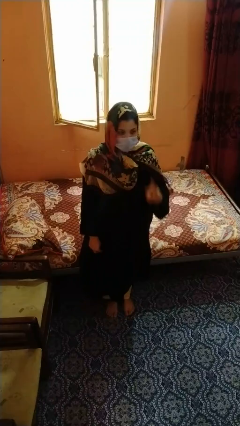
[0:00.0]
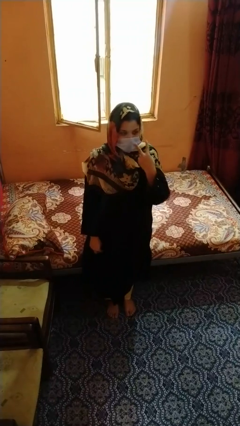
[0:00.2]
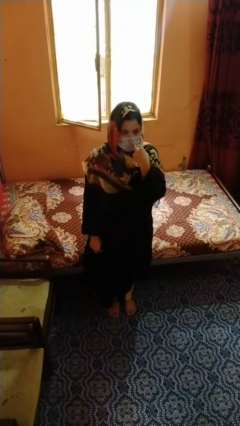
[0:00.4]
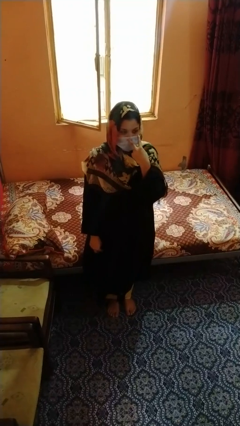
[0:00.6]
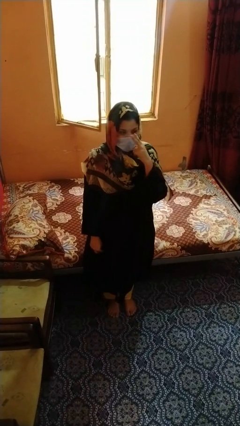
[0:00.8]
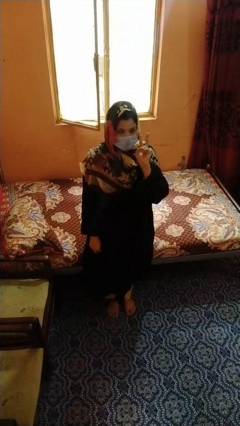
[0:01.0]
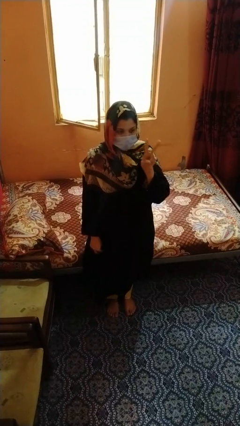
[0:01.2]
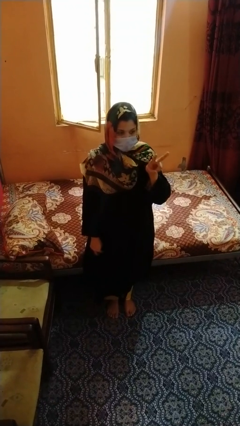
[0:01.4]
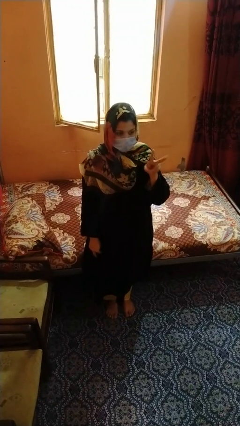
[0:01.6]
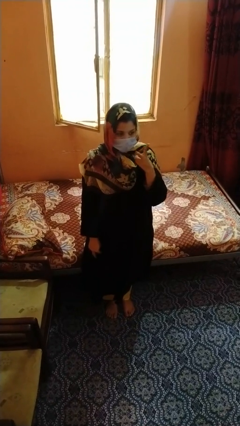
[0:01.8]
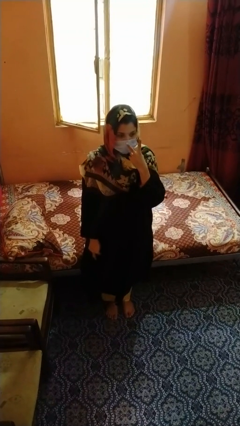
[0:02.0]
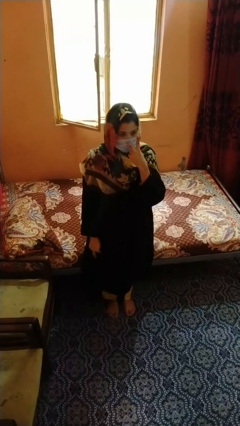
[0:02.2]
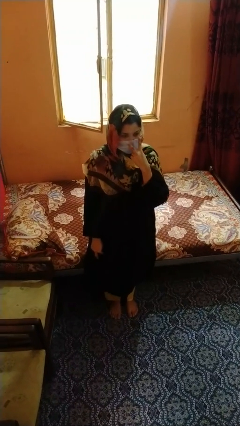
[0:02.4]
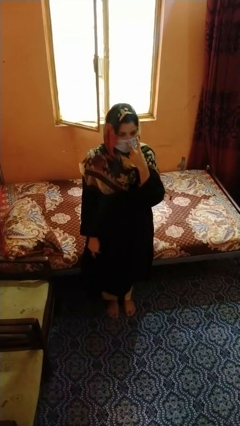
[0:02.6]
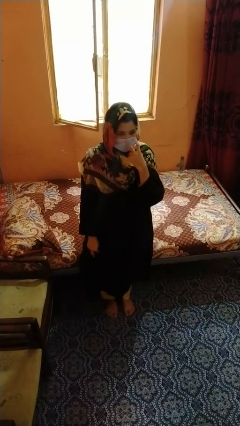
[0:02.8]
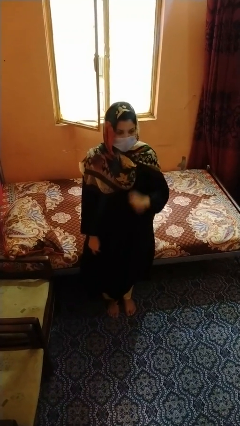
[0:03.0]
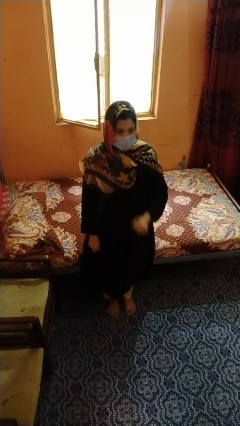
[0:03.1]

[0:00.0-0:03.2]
person gestures watch closely

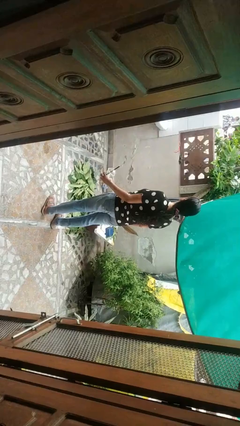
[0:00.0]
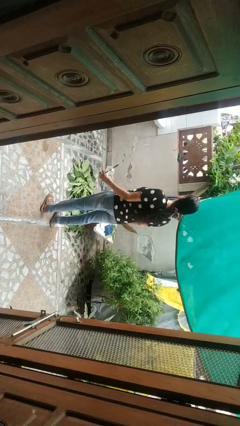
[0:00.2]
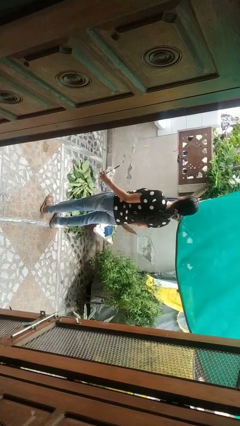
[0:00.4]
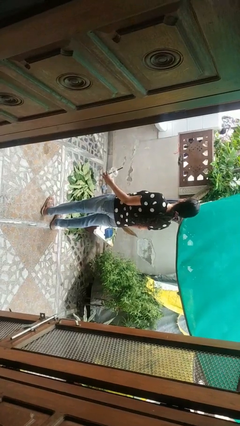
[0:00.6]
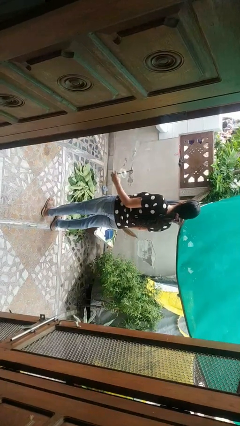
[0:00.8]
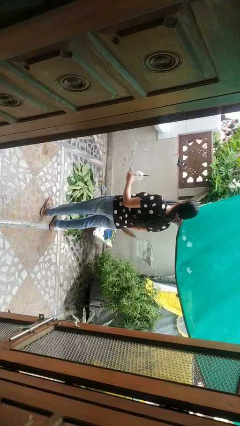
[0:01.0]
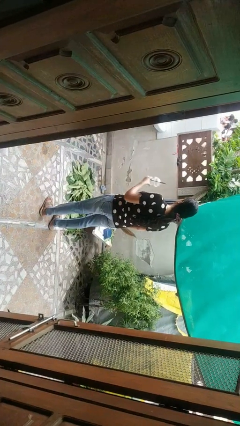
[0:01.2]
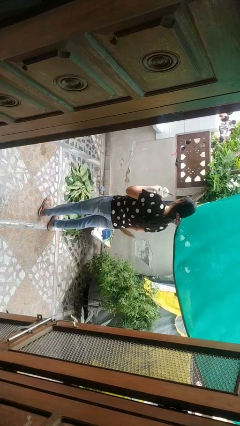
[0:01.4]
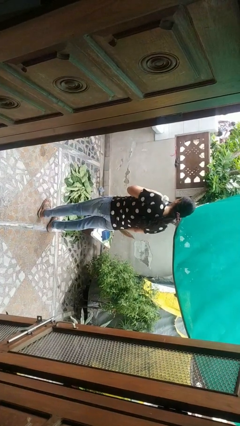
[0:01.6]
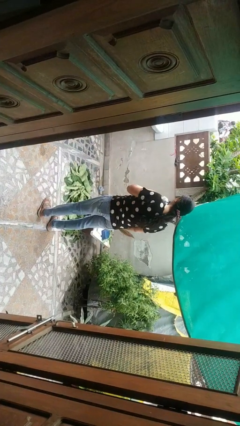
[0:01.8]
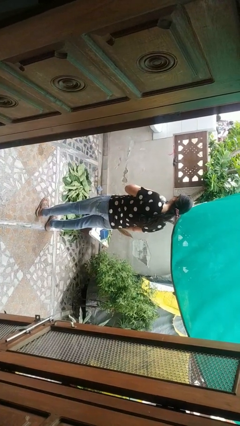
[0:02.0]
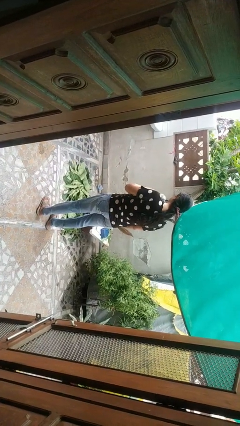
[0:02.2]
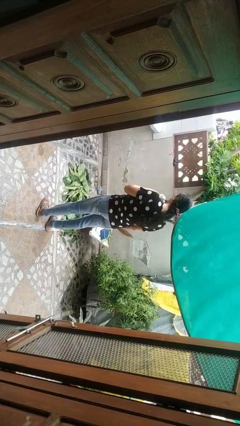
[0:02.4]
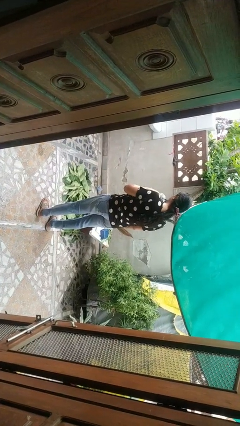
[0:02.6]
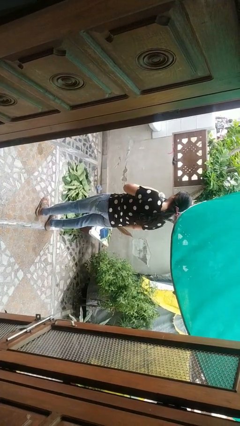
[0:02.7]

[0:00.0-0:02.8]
person drinks from straw

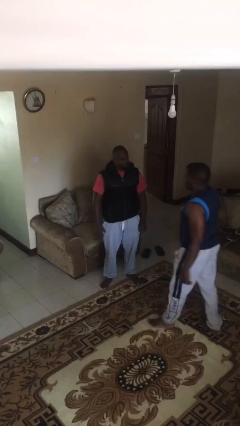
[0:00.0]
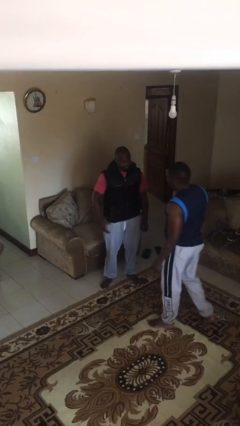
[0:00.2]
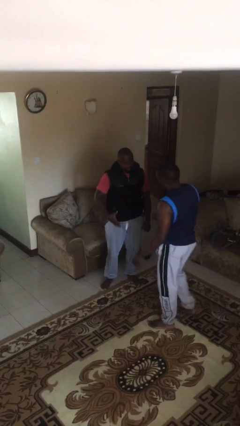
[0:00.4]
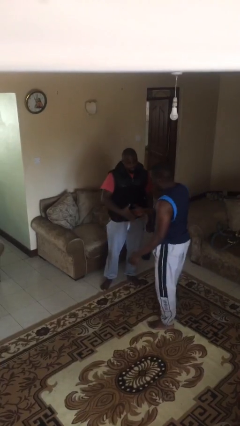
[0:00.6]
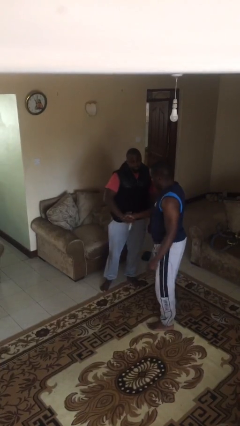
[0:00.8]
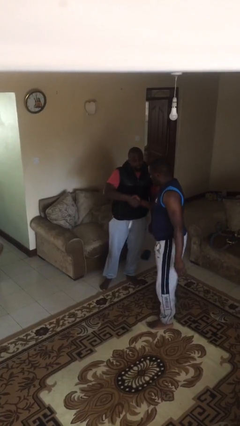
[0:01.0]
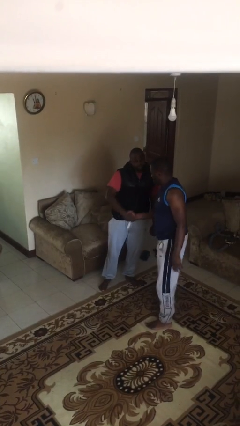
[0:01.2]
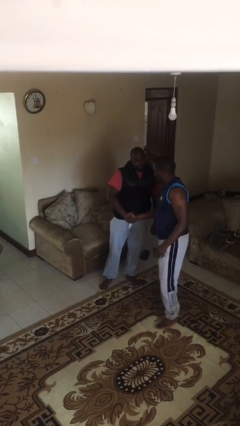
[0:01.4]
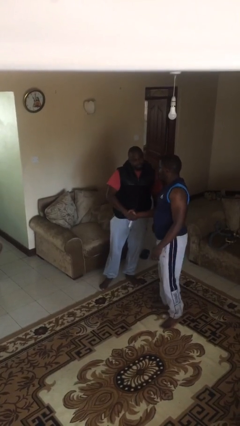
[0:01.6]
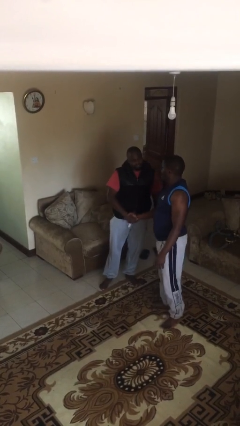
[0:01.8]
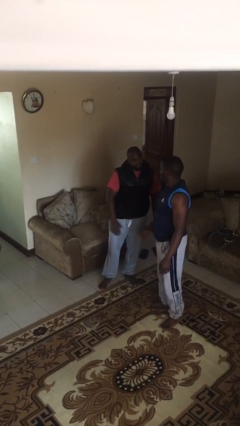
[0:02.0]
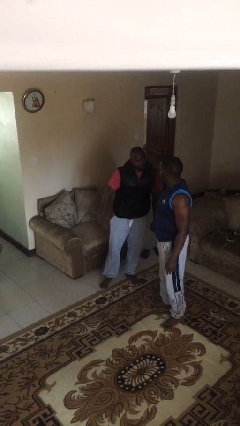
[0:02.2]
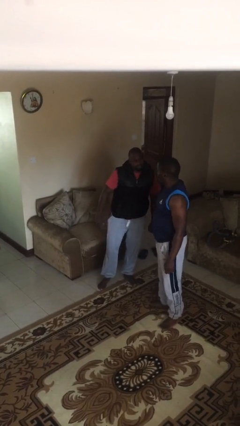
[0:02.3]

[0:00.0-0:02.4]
person shakes hand

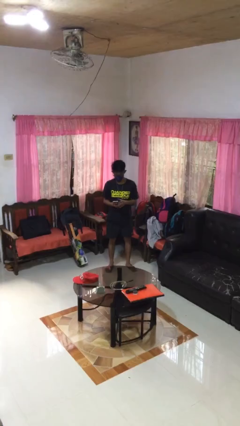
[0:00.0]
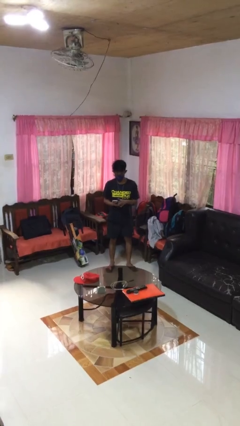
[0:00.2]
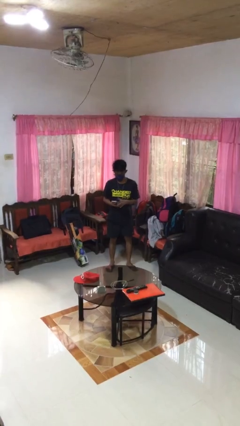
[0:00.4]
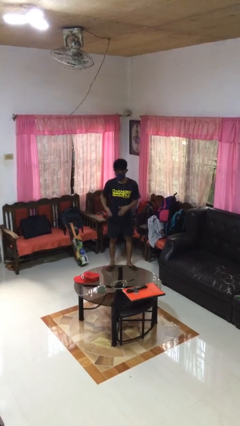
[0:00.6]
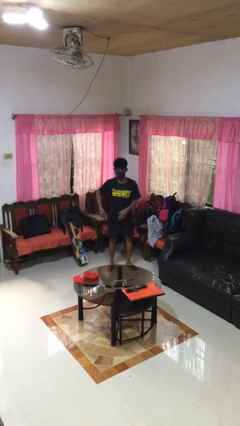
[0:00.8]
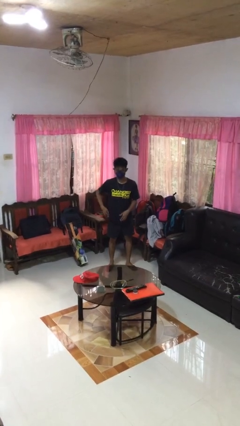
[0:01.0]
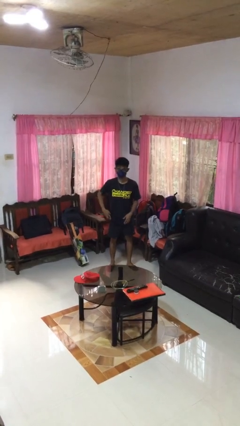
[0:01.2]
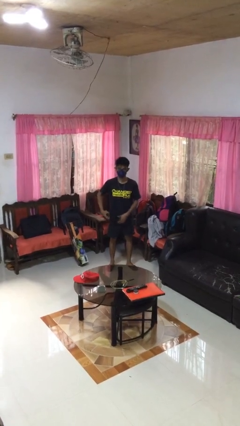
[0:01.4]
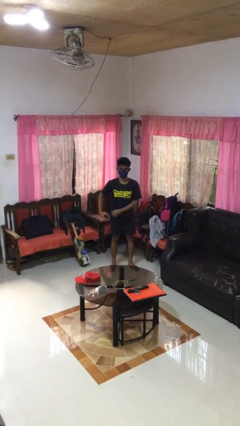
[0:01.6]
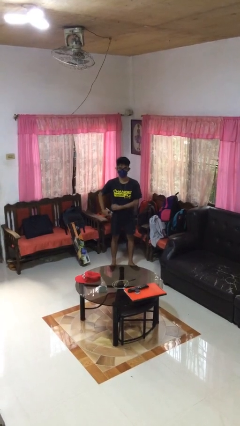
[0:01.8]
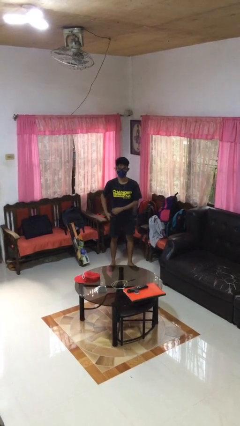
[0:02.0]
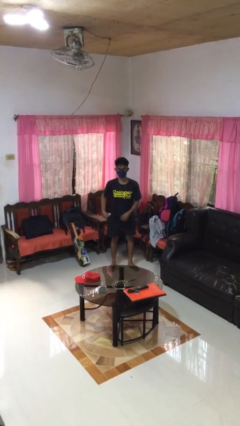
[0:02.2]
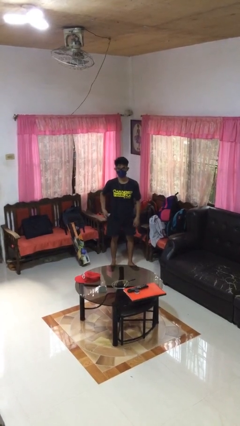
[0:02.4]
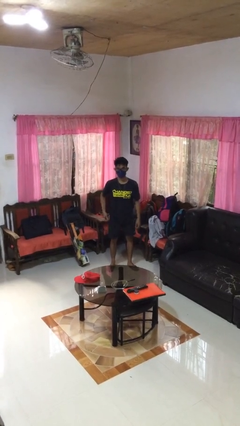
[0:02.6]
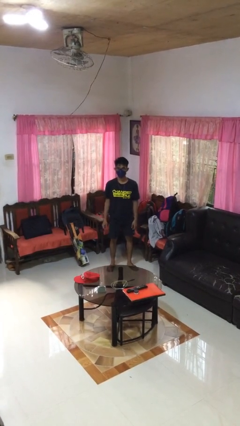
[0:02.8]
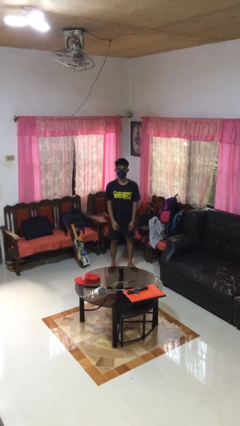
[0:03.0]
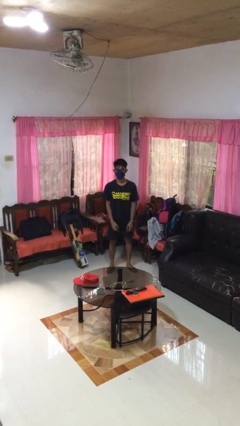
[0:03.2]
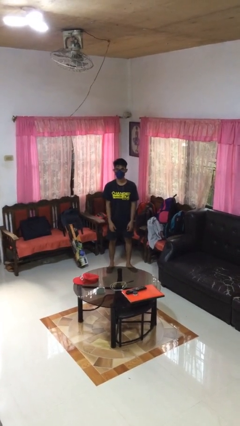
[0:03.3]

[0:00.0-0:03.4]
person puts phone into pocket

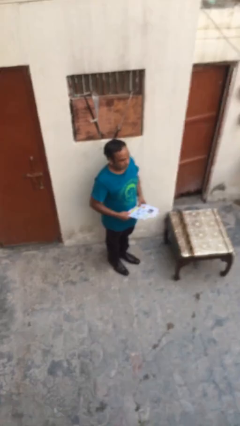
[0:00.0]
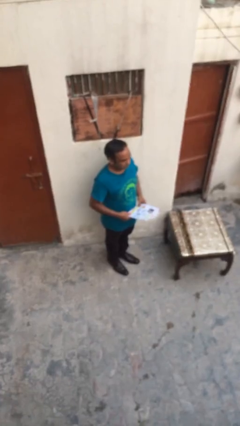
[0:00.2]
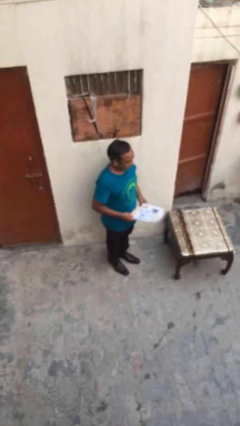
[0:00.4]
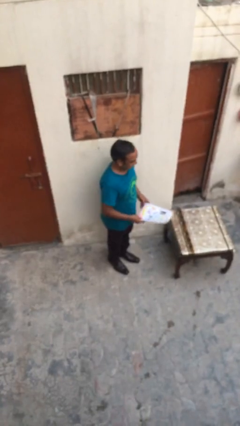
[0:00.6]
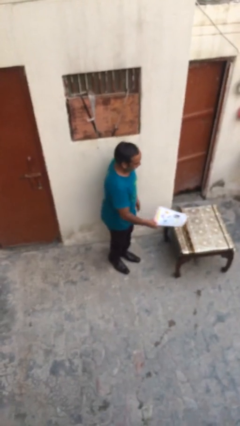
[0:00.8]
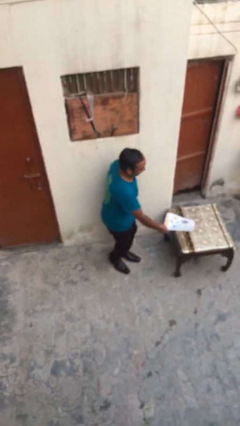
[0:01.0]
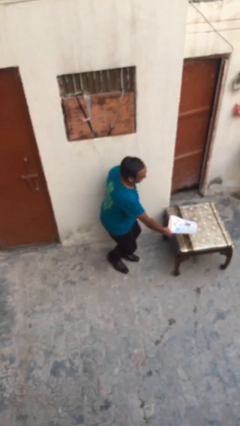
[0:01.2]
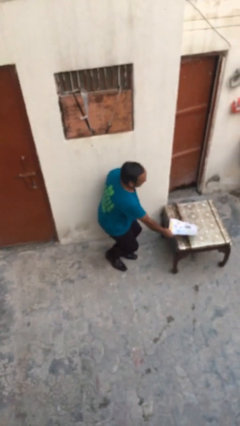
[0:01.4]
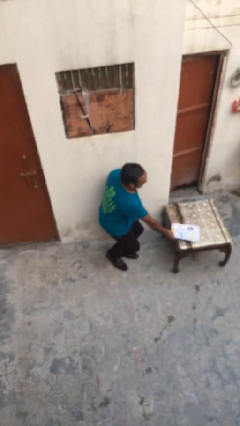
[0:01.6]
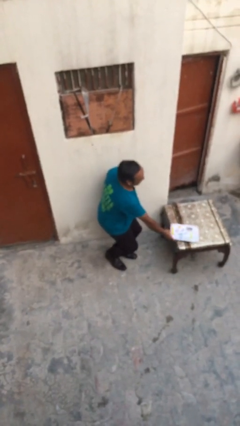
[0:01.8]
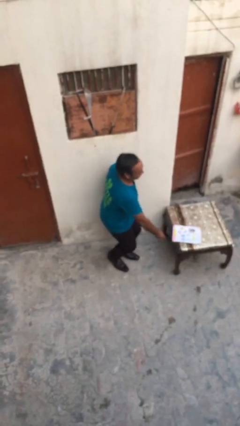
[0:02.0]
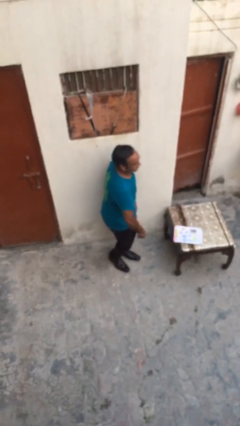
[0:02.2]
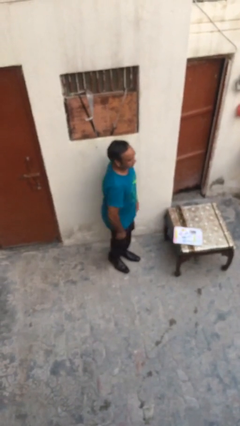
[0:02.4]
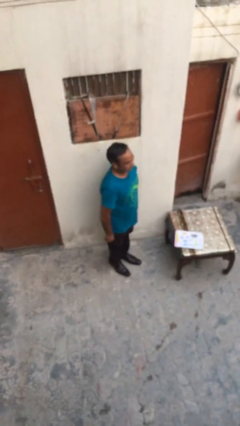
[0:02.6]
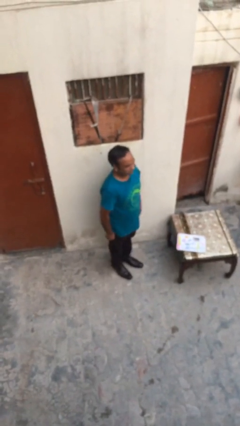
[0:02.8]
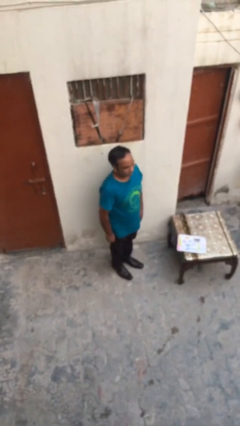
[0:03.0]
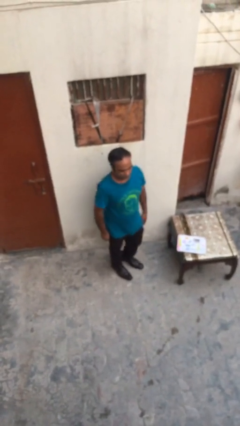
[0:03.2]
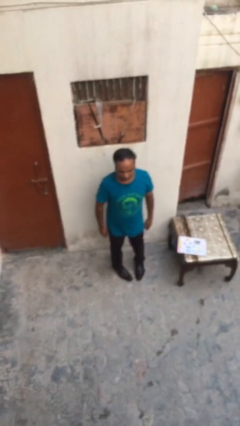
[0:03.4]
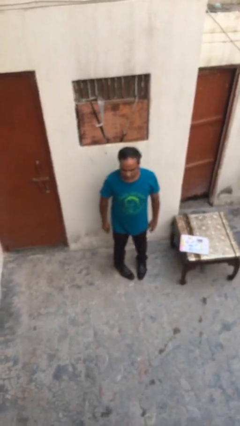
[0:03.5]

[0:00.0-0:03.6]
person puts down object on table

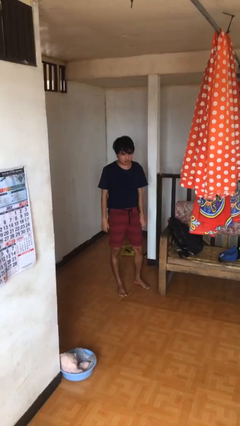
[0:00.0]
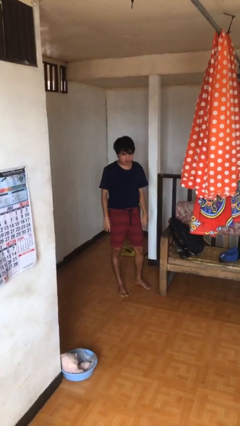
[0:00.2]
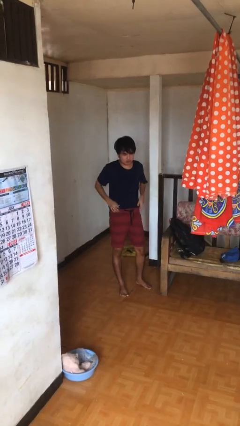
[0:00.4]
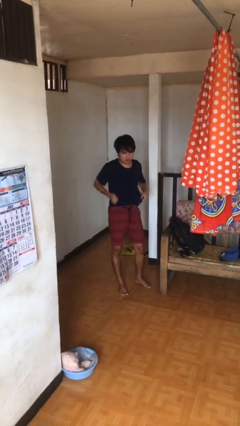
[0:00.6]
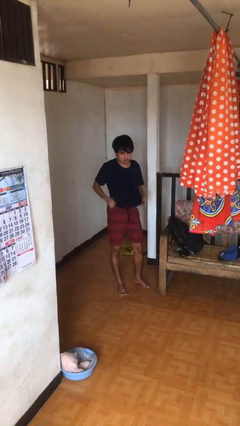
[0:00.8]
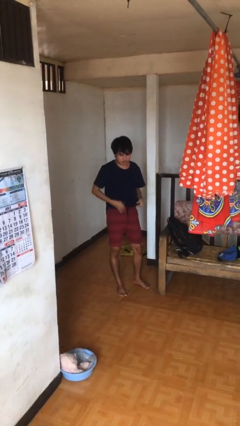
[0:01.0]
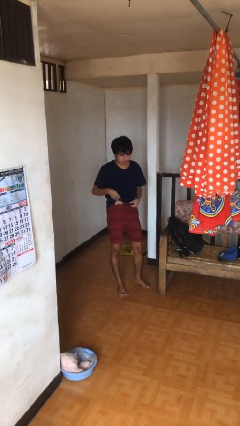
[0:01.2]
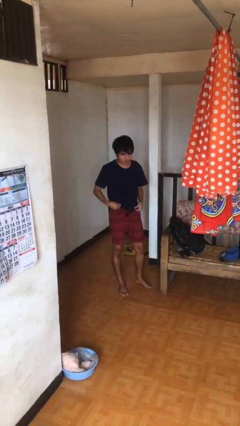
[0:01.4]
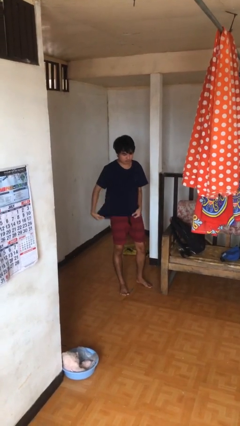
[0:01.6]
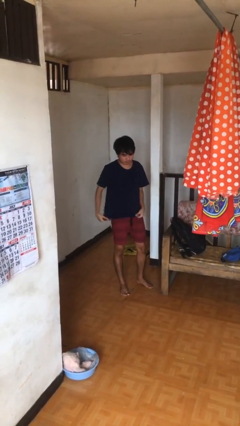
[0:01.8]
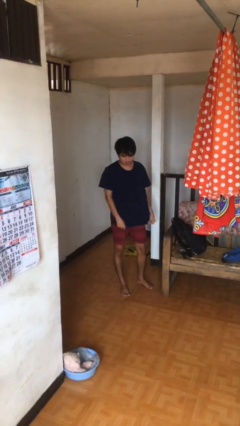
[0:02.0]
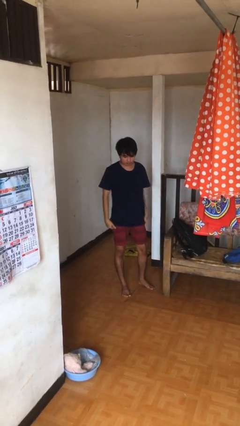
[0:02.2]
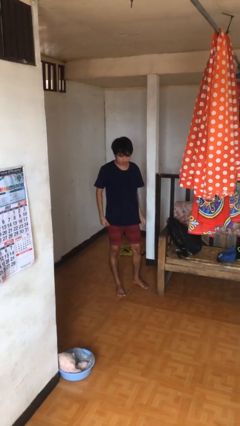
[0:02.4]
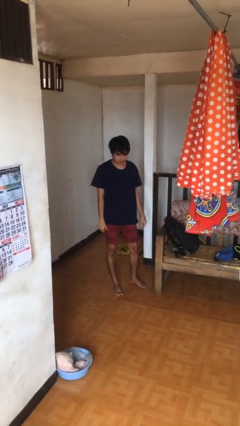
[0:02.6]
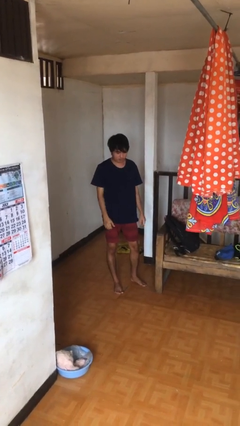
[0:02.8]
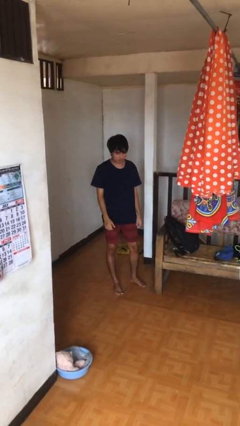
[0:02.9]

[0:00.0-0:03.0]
person untucks shirt
